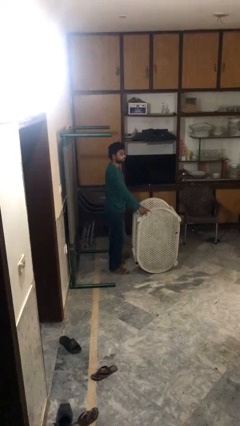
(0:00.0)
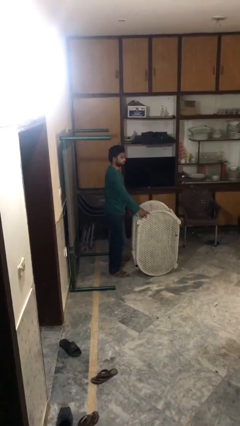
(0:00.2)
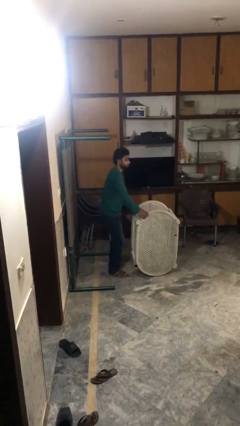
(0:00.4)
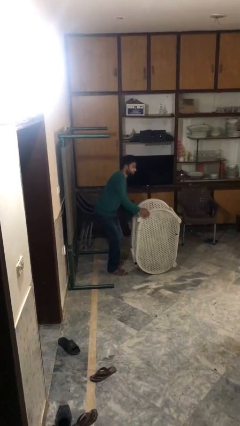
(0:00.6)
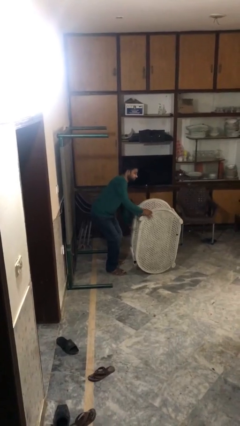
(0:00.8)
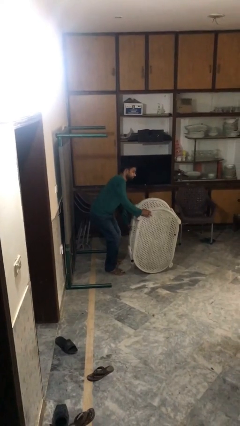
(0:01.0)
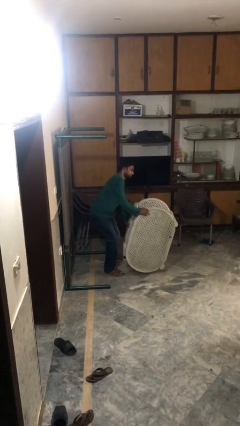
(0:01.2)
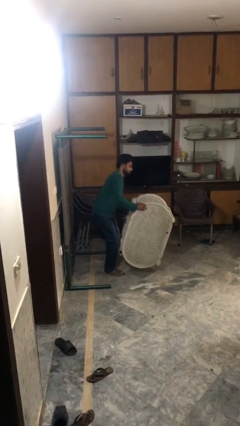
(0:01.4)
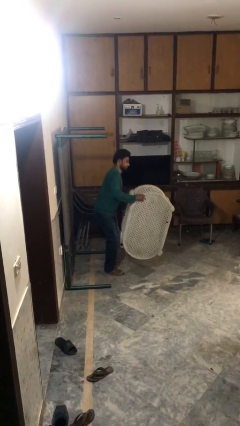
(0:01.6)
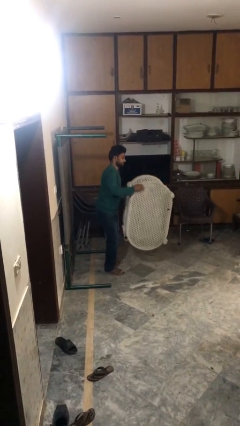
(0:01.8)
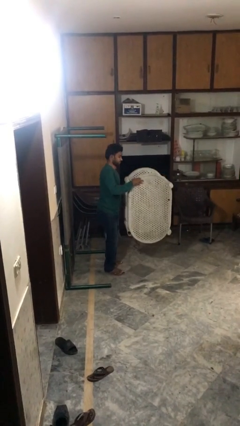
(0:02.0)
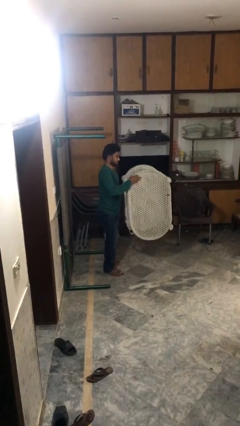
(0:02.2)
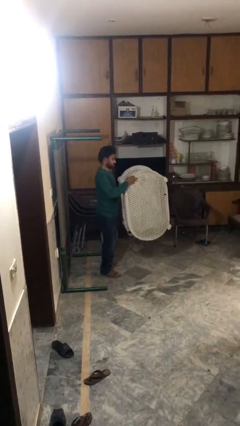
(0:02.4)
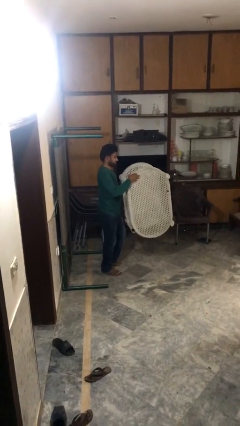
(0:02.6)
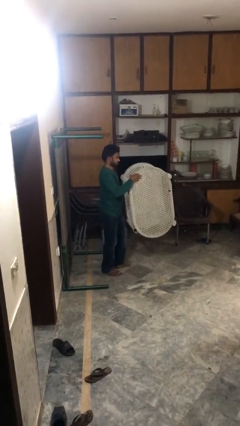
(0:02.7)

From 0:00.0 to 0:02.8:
person picks up object from floor

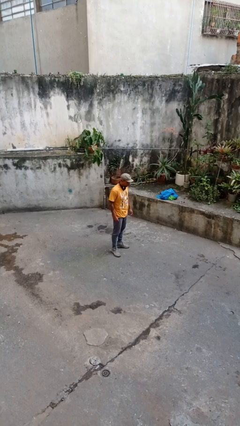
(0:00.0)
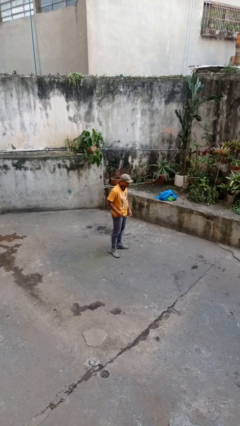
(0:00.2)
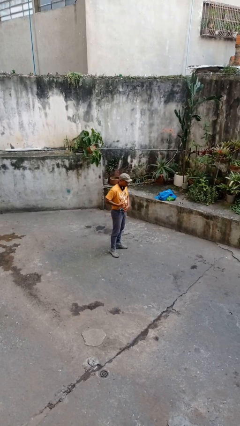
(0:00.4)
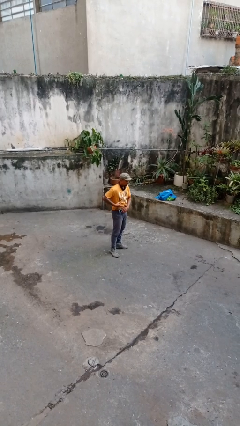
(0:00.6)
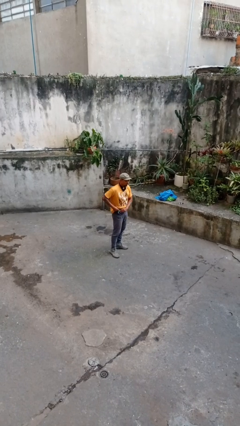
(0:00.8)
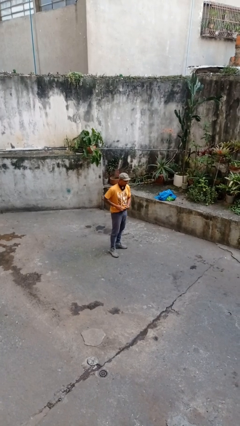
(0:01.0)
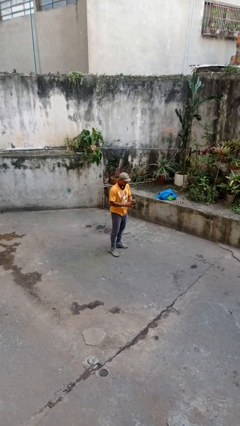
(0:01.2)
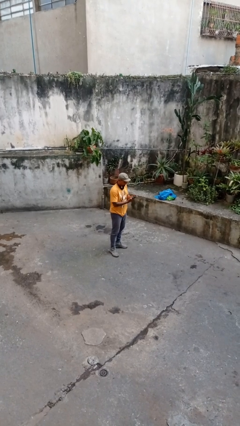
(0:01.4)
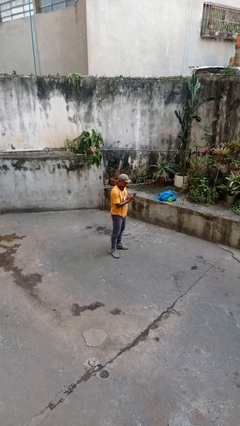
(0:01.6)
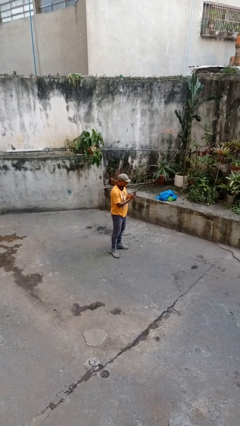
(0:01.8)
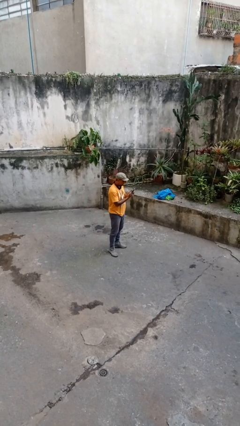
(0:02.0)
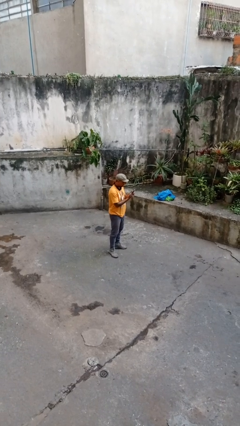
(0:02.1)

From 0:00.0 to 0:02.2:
person takes phone from pocket

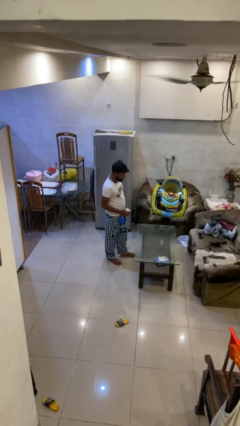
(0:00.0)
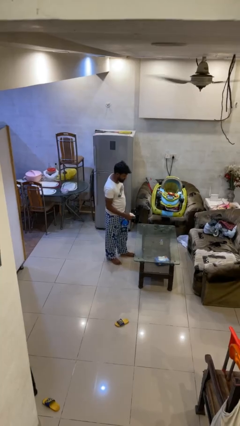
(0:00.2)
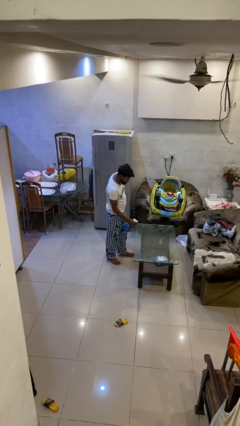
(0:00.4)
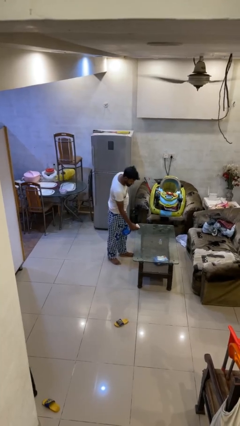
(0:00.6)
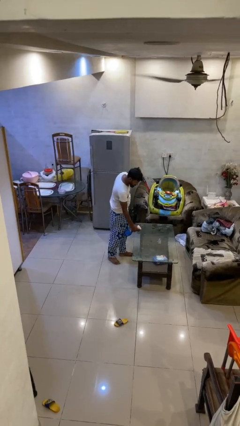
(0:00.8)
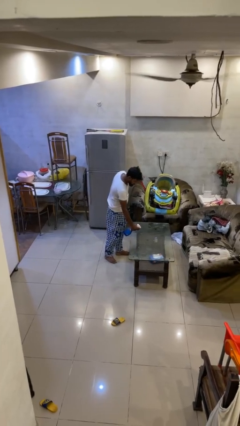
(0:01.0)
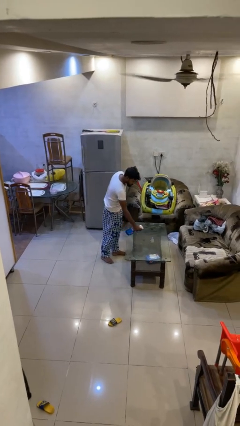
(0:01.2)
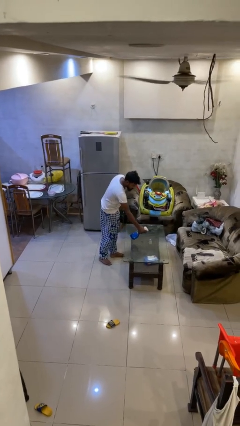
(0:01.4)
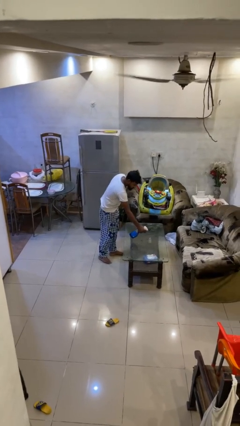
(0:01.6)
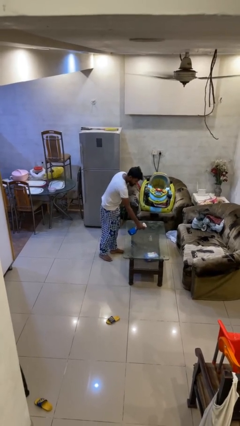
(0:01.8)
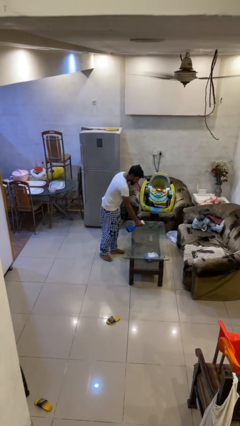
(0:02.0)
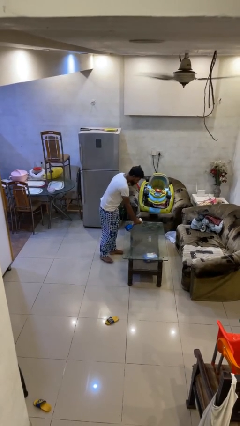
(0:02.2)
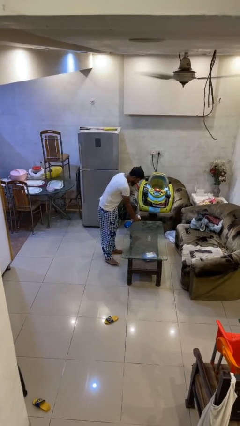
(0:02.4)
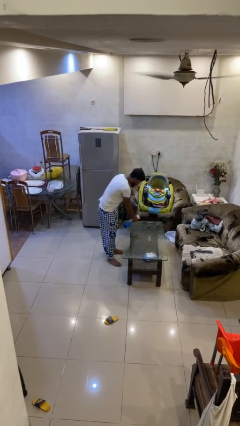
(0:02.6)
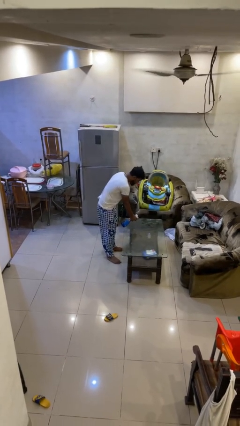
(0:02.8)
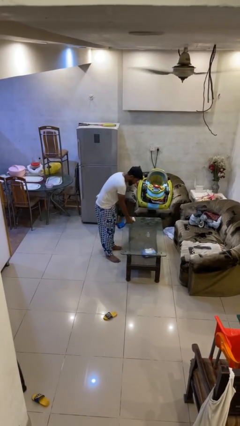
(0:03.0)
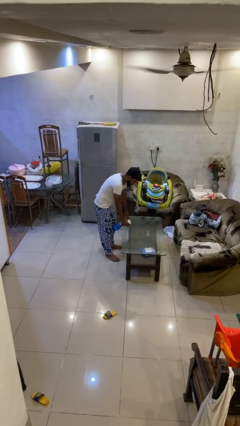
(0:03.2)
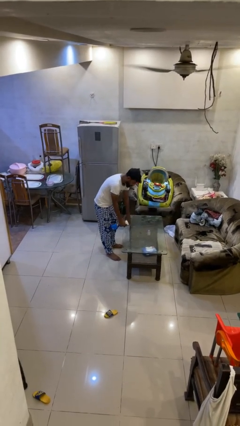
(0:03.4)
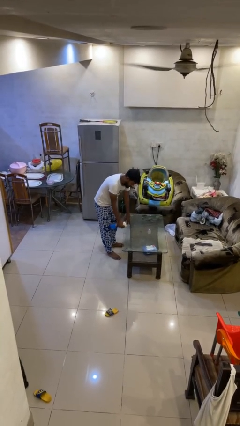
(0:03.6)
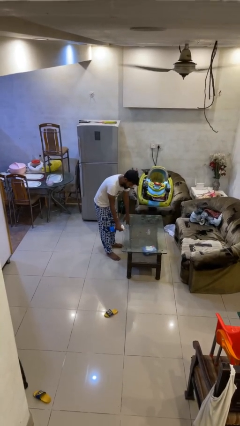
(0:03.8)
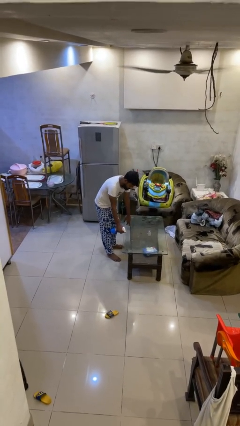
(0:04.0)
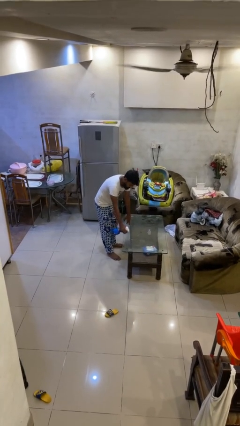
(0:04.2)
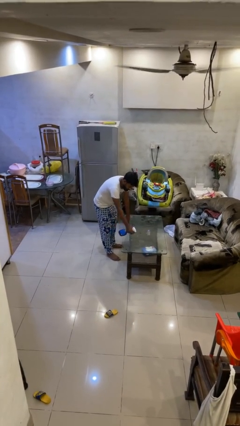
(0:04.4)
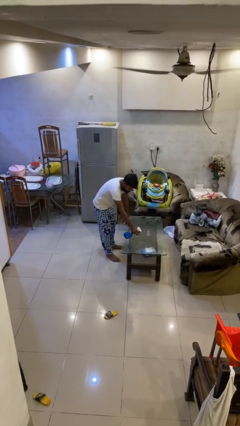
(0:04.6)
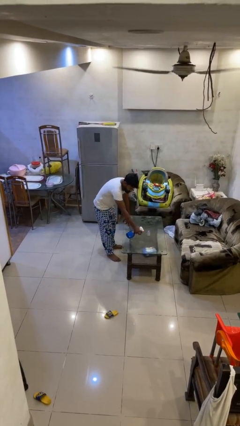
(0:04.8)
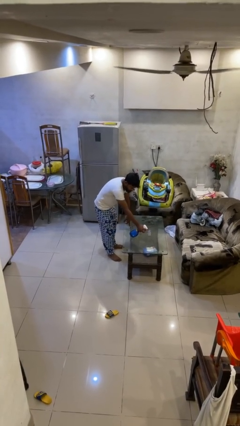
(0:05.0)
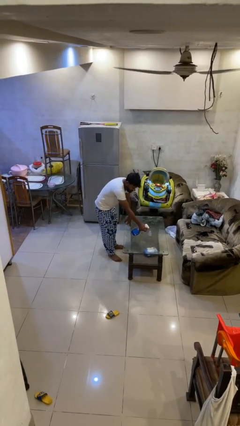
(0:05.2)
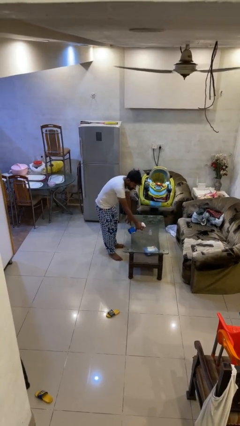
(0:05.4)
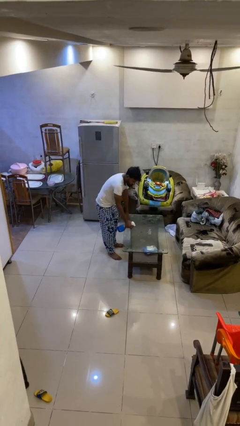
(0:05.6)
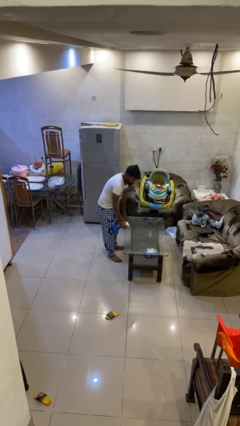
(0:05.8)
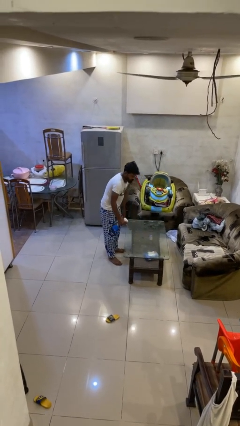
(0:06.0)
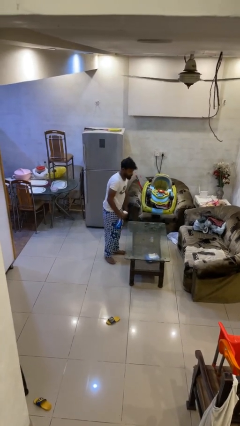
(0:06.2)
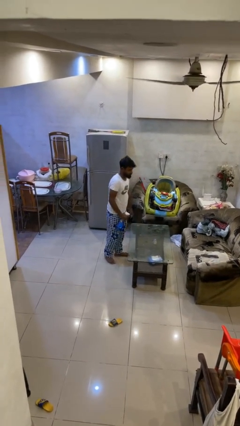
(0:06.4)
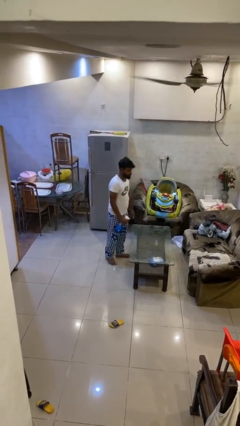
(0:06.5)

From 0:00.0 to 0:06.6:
person sprays from bottle

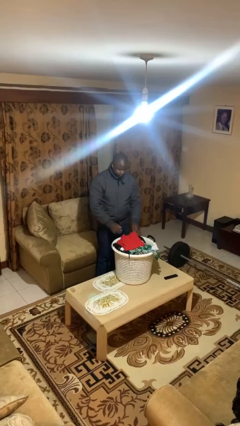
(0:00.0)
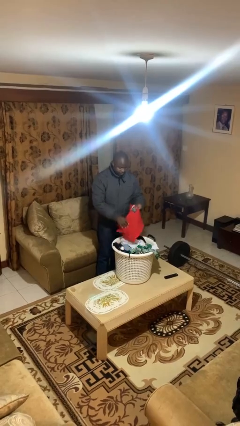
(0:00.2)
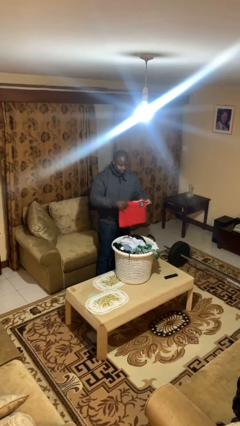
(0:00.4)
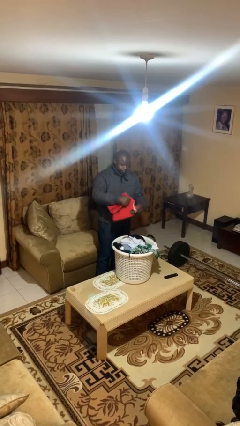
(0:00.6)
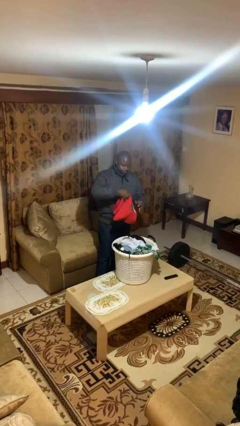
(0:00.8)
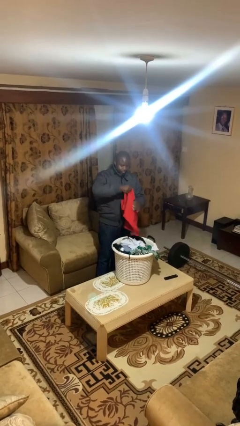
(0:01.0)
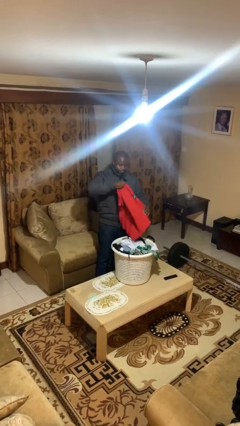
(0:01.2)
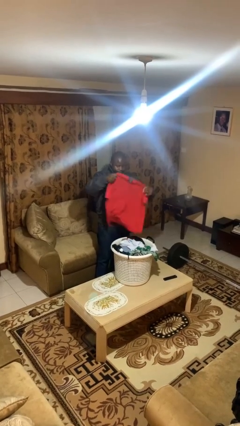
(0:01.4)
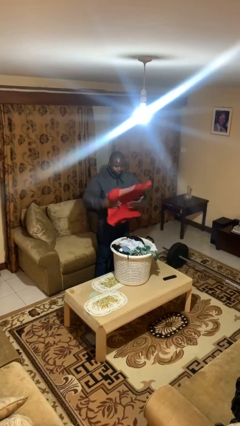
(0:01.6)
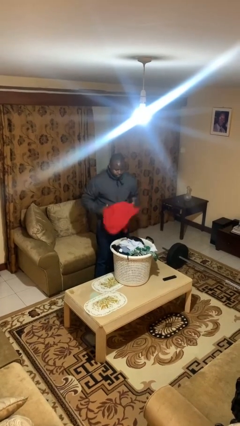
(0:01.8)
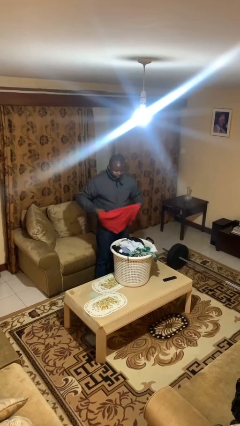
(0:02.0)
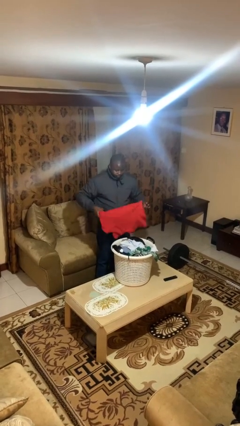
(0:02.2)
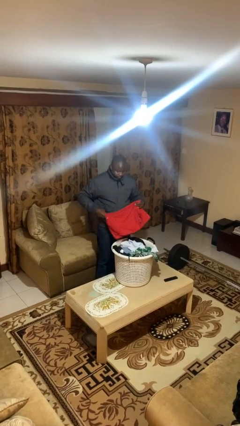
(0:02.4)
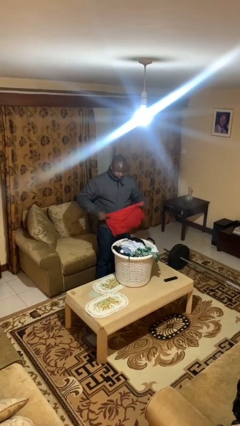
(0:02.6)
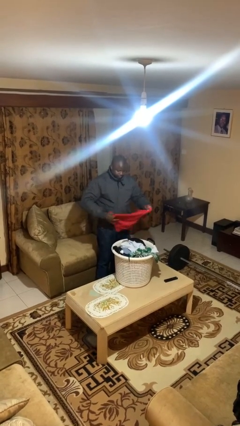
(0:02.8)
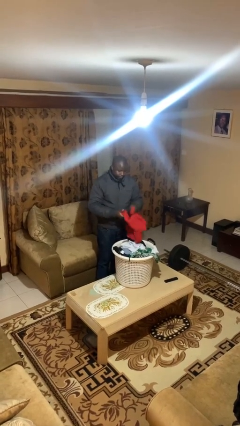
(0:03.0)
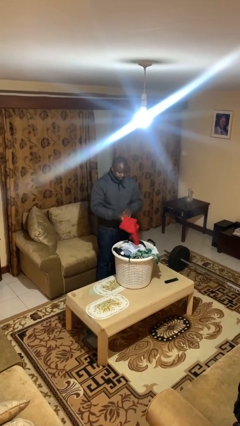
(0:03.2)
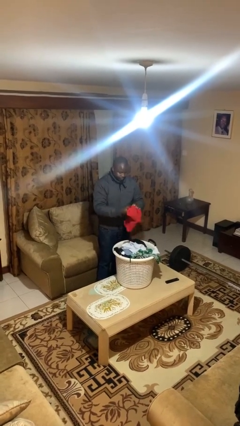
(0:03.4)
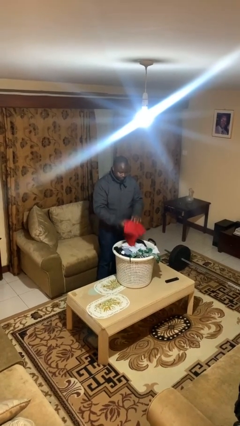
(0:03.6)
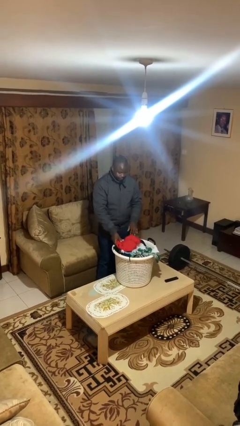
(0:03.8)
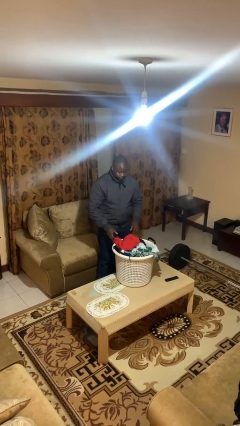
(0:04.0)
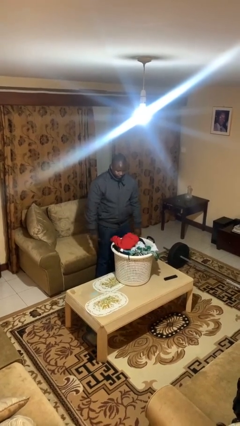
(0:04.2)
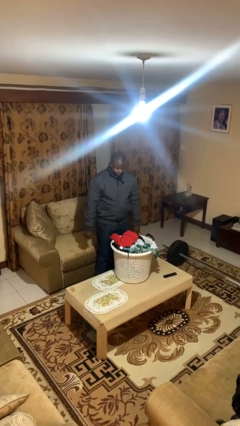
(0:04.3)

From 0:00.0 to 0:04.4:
person folds shirt

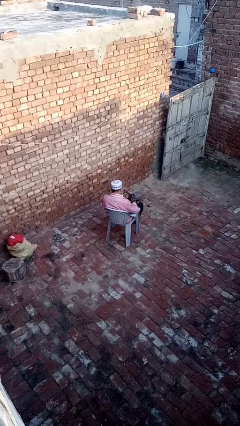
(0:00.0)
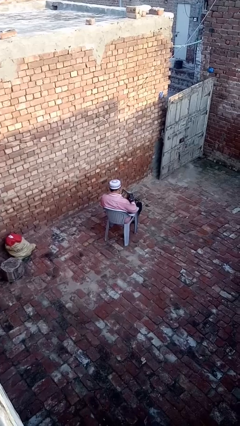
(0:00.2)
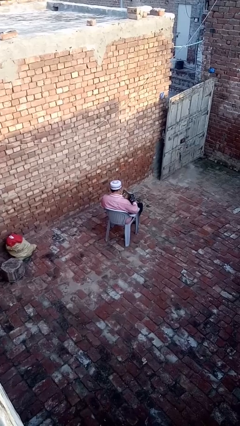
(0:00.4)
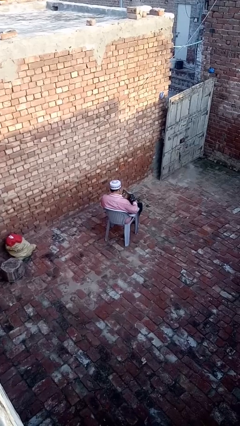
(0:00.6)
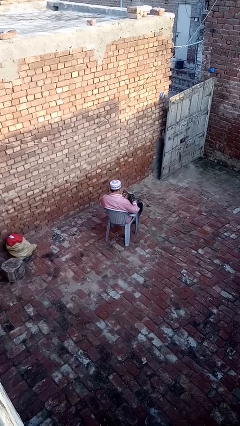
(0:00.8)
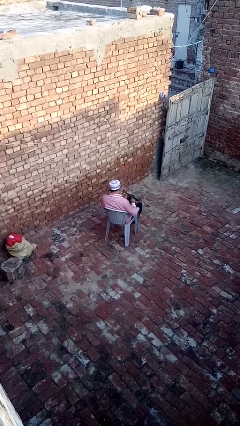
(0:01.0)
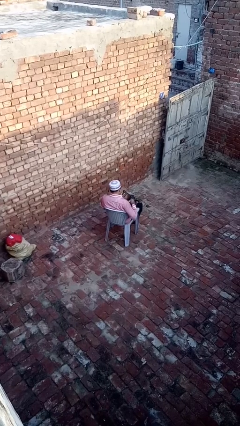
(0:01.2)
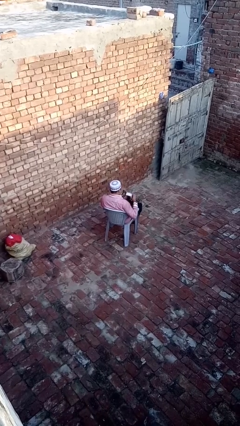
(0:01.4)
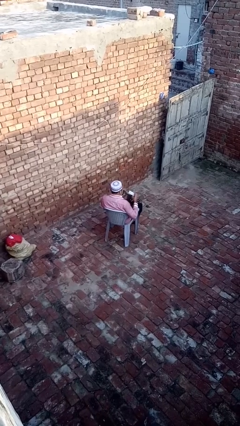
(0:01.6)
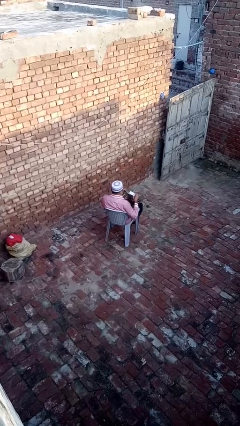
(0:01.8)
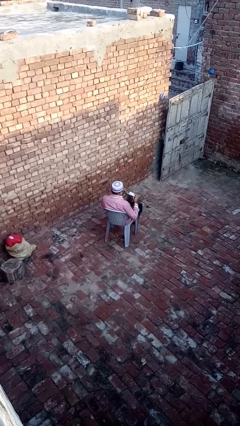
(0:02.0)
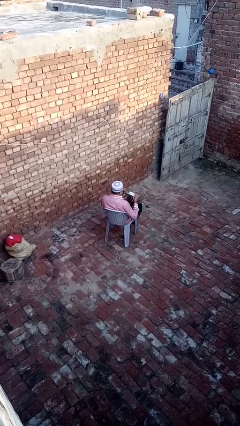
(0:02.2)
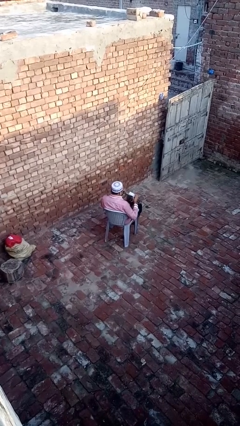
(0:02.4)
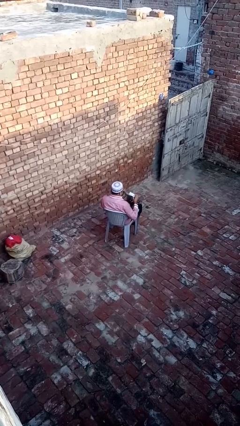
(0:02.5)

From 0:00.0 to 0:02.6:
person takes object from purse
